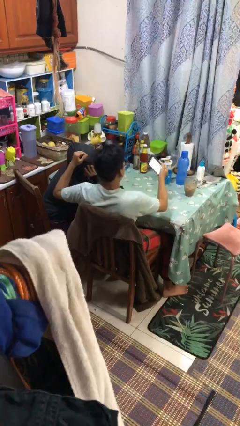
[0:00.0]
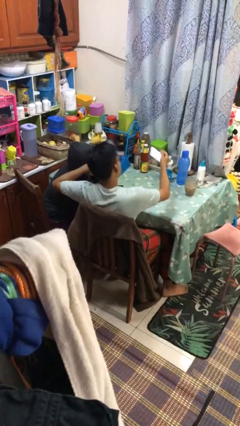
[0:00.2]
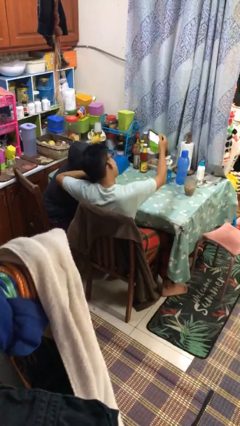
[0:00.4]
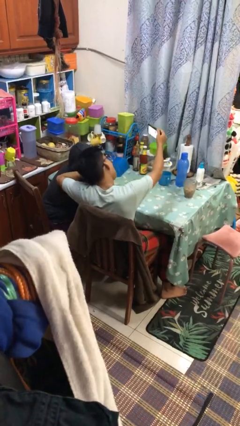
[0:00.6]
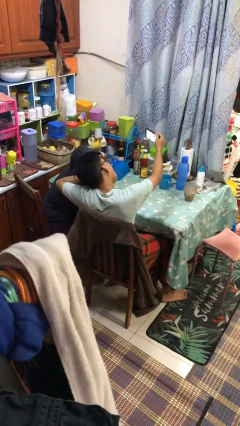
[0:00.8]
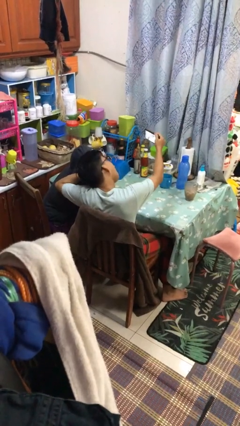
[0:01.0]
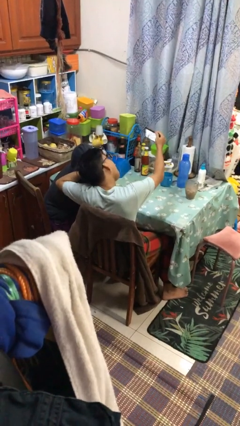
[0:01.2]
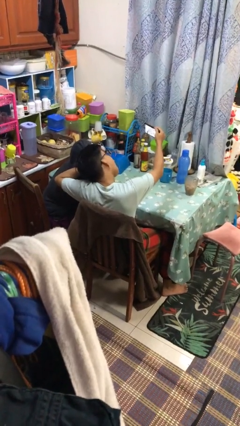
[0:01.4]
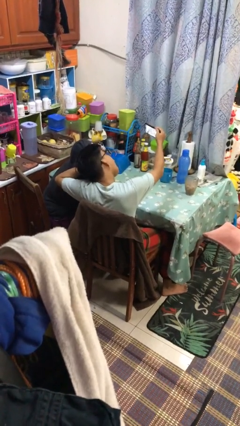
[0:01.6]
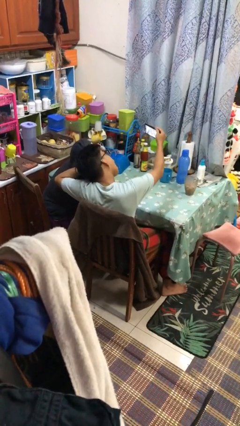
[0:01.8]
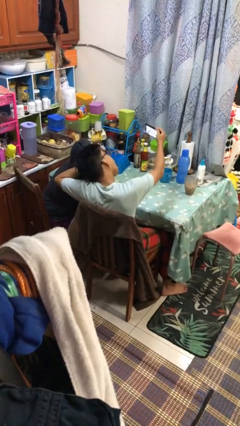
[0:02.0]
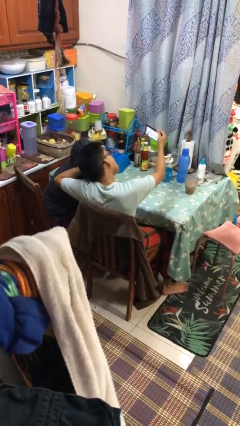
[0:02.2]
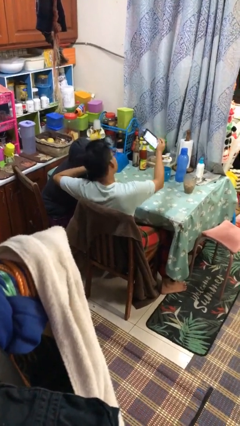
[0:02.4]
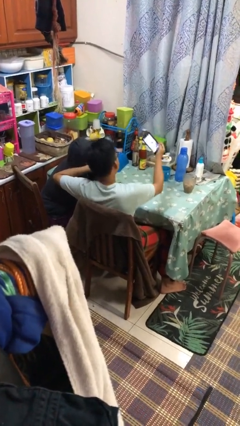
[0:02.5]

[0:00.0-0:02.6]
person takes selfie with person

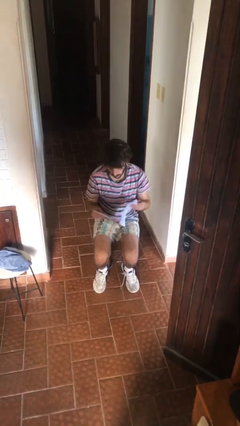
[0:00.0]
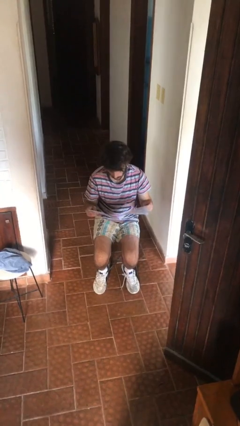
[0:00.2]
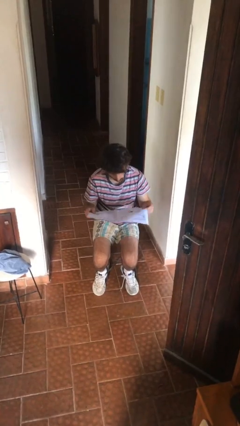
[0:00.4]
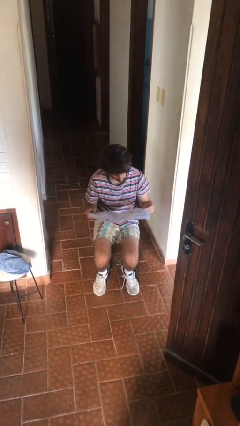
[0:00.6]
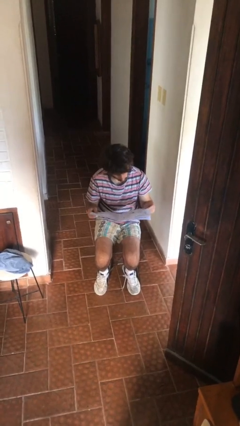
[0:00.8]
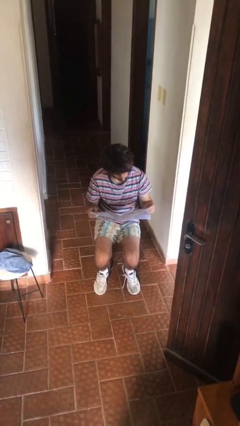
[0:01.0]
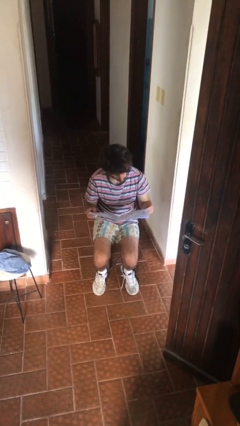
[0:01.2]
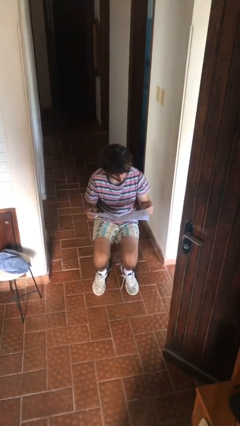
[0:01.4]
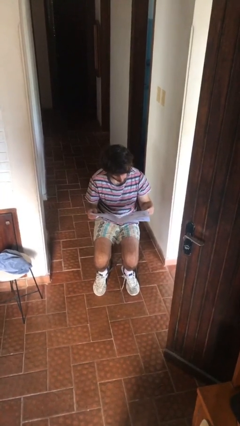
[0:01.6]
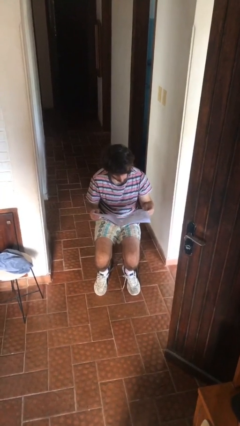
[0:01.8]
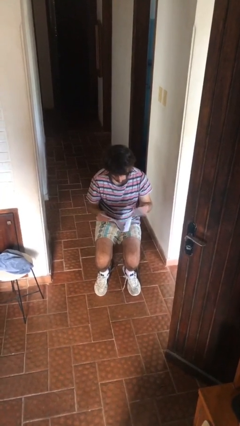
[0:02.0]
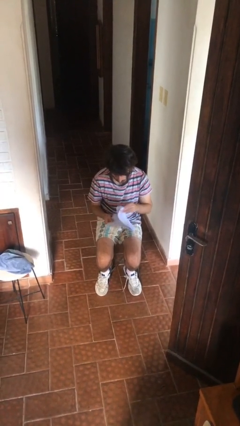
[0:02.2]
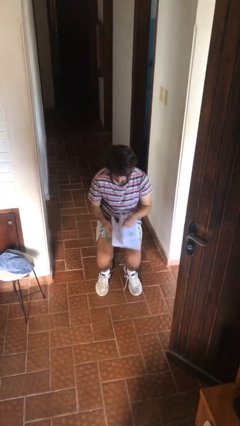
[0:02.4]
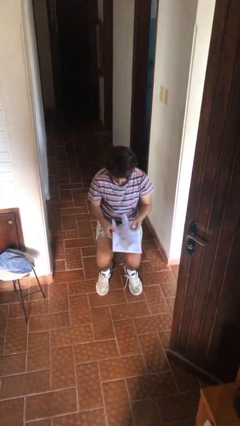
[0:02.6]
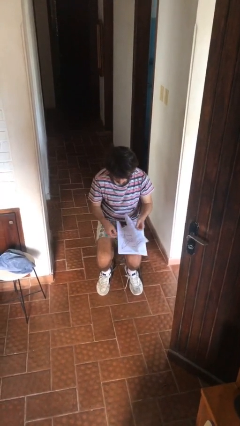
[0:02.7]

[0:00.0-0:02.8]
person reads document

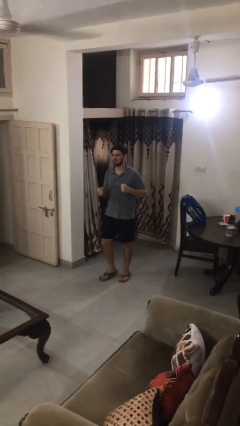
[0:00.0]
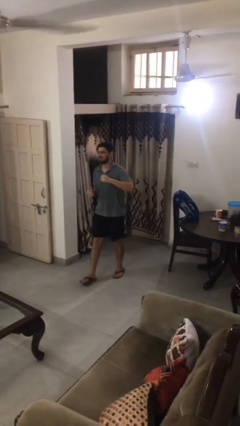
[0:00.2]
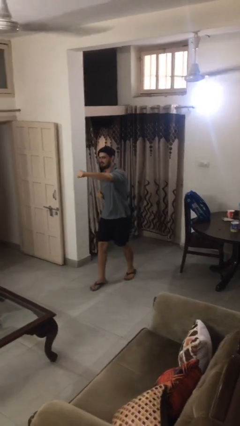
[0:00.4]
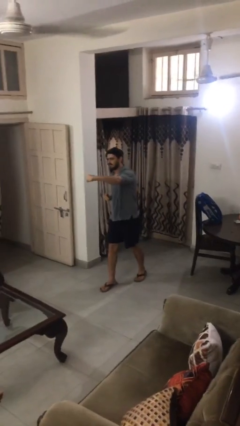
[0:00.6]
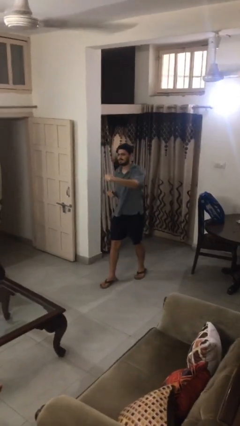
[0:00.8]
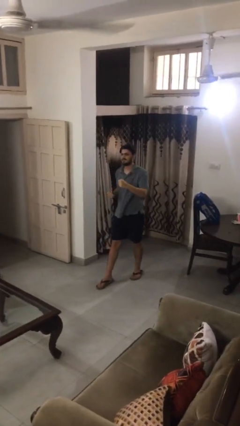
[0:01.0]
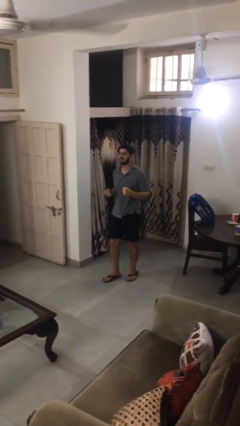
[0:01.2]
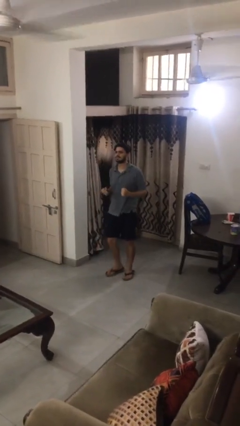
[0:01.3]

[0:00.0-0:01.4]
person punches

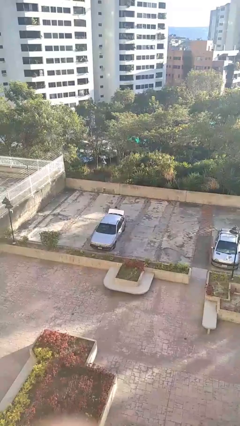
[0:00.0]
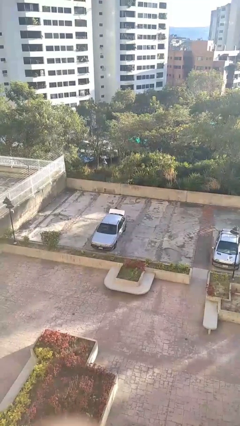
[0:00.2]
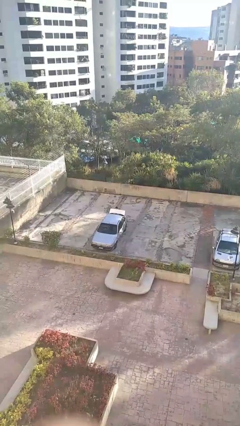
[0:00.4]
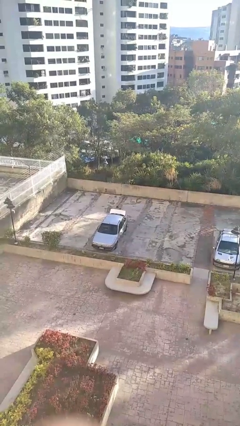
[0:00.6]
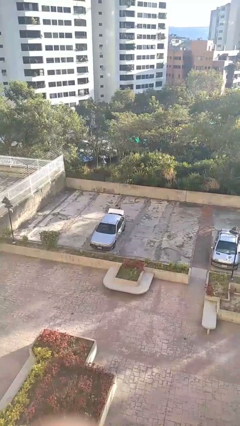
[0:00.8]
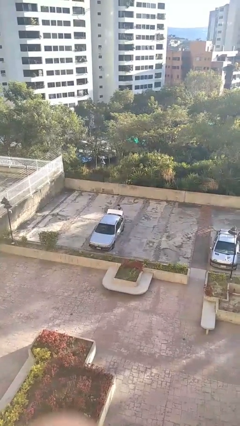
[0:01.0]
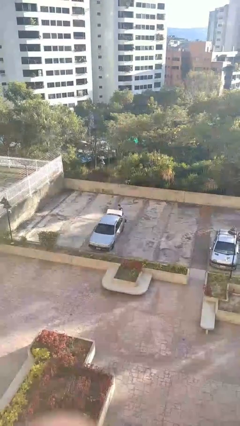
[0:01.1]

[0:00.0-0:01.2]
person loads car

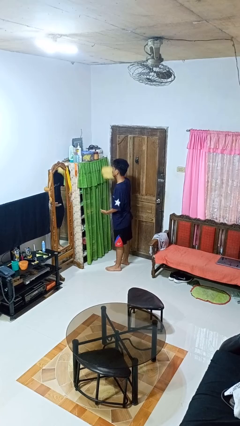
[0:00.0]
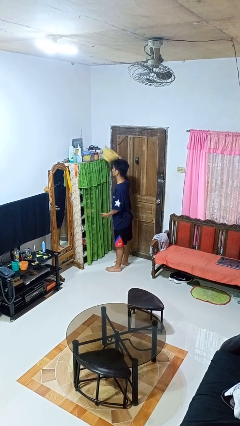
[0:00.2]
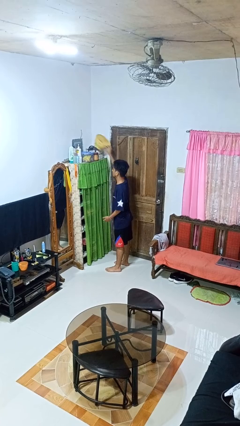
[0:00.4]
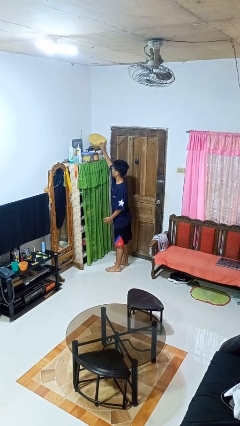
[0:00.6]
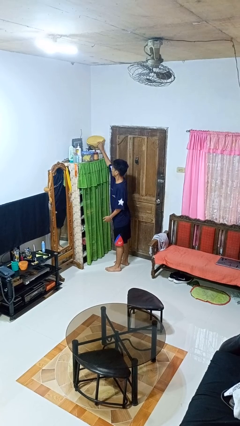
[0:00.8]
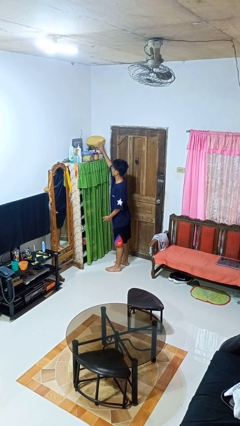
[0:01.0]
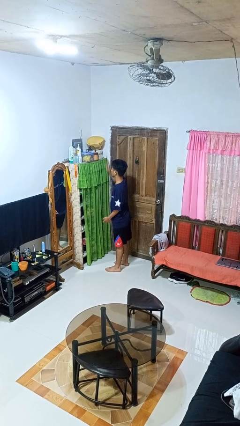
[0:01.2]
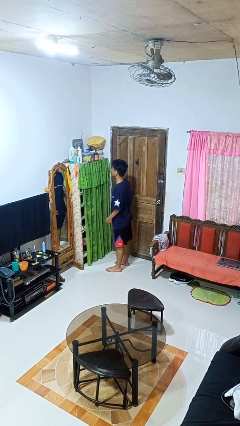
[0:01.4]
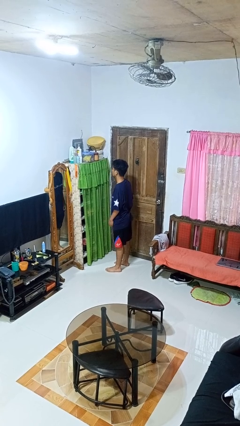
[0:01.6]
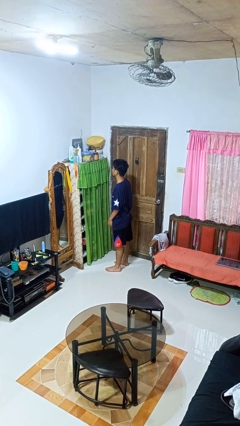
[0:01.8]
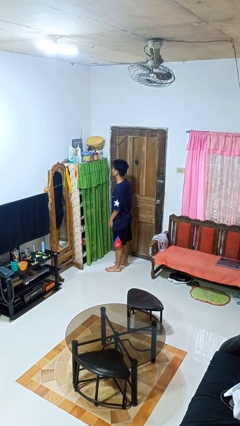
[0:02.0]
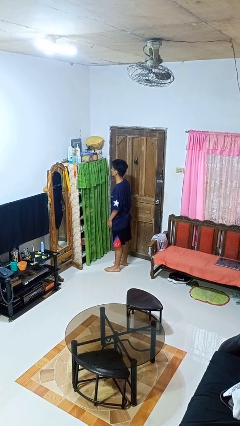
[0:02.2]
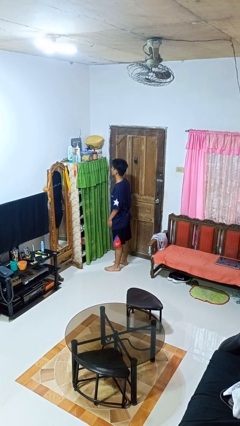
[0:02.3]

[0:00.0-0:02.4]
person puts down object on shelf

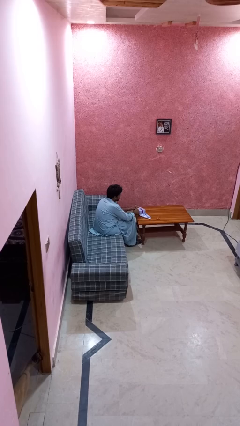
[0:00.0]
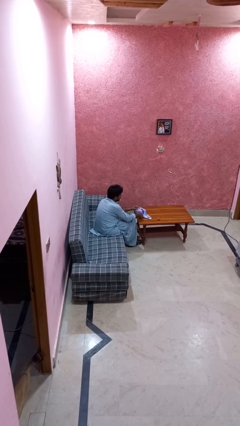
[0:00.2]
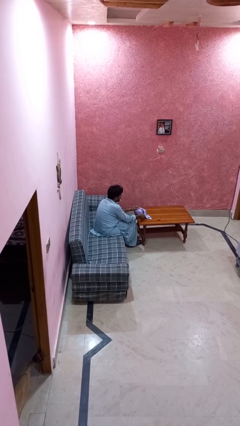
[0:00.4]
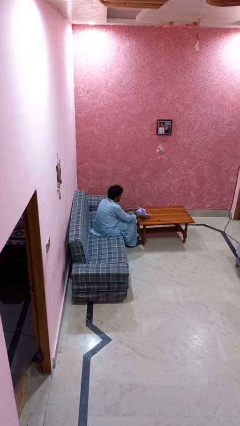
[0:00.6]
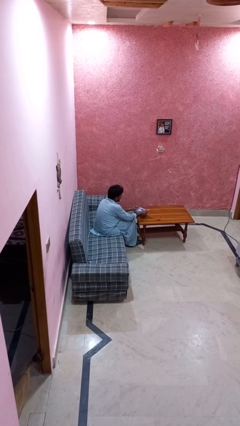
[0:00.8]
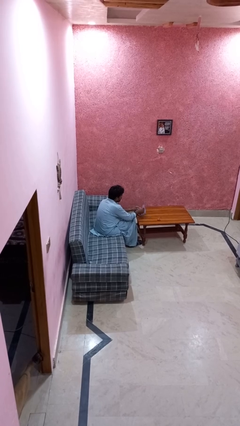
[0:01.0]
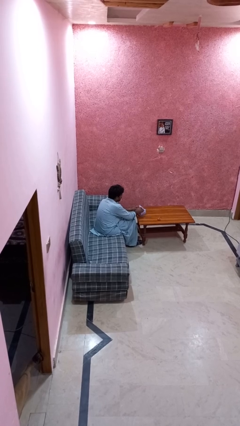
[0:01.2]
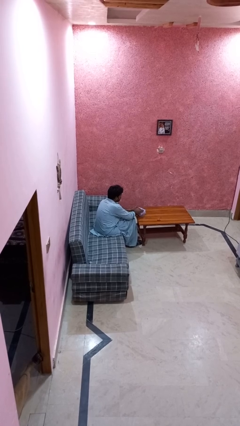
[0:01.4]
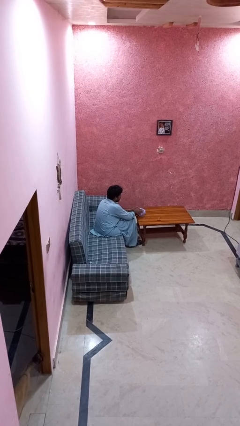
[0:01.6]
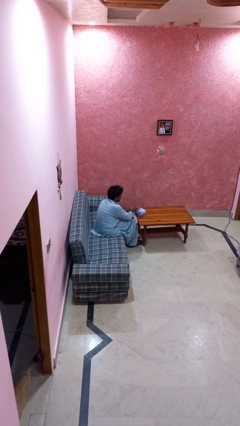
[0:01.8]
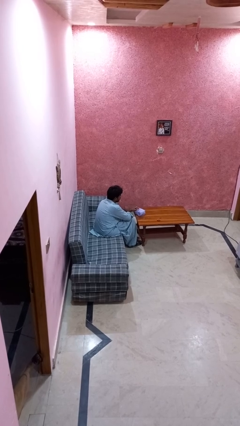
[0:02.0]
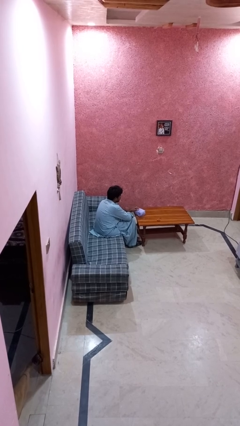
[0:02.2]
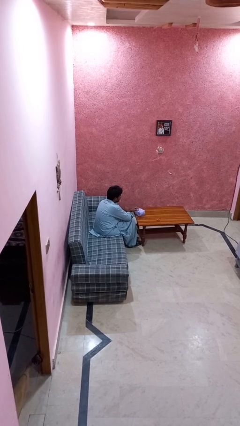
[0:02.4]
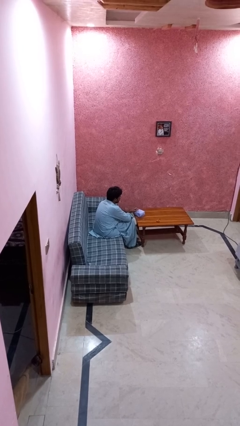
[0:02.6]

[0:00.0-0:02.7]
person wraps box

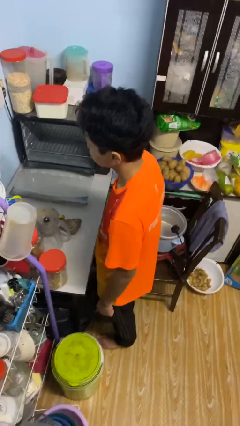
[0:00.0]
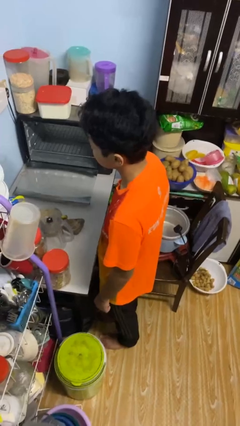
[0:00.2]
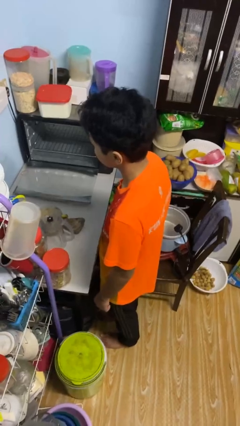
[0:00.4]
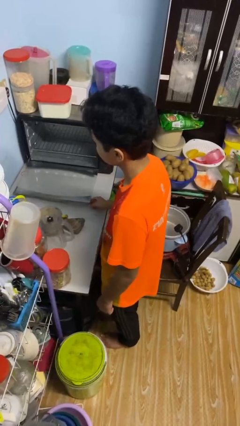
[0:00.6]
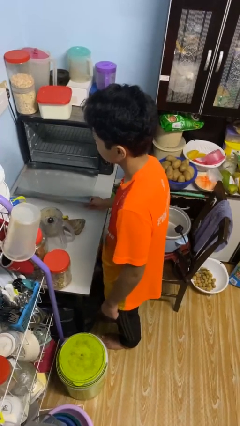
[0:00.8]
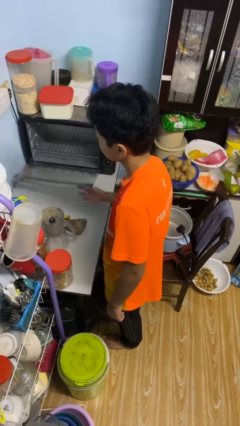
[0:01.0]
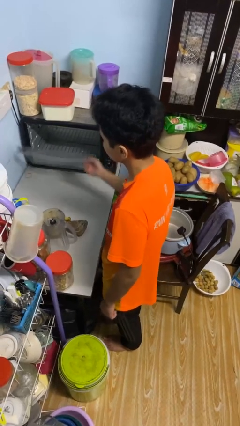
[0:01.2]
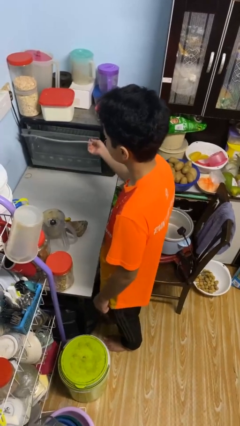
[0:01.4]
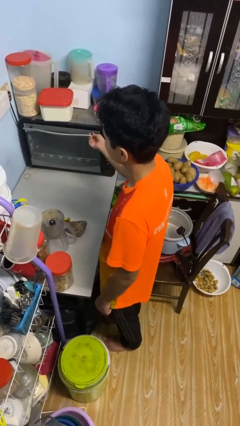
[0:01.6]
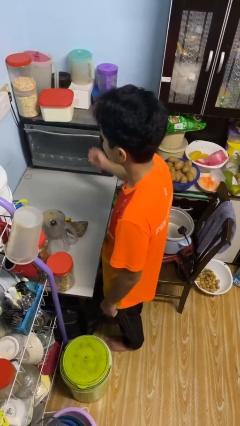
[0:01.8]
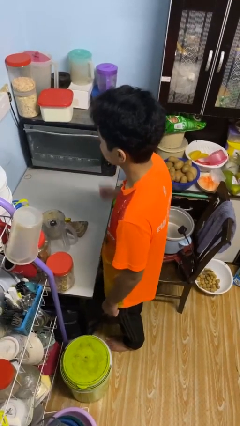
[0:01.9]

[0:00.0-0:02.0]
person closes oven door

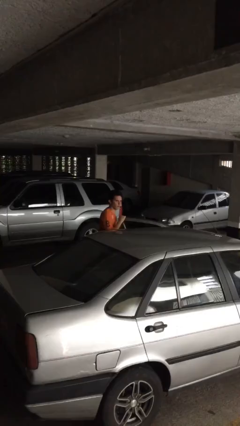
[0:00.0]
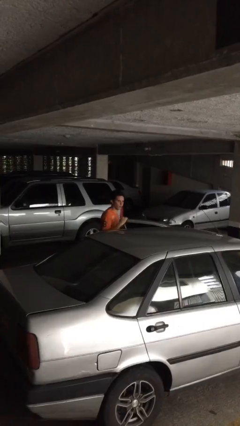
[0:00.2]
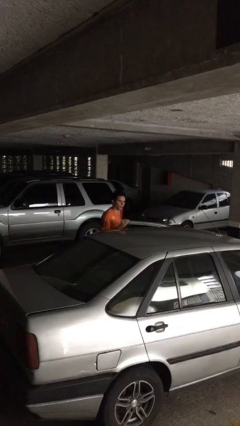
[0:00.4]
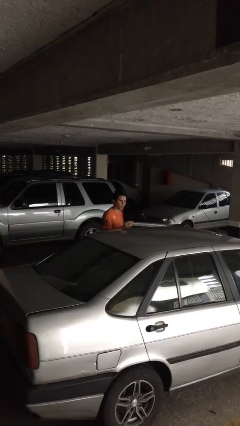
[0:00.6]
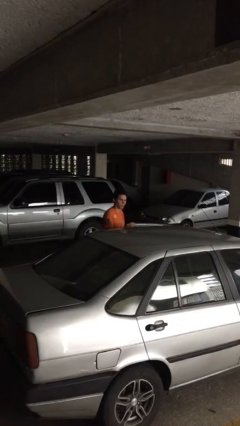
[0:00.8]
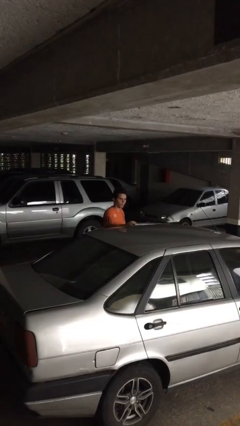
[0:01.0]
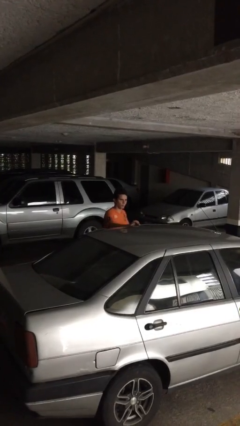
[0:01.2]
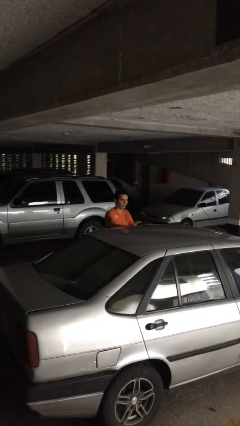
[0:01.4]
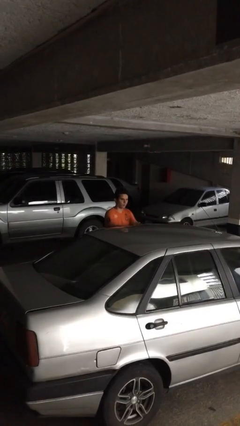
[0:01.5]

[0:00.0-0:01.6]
person closes car door
